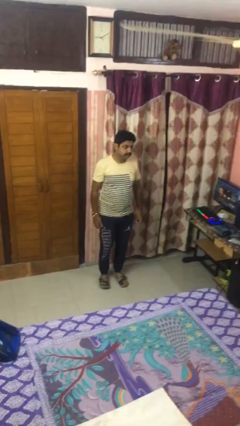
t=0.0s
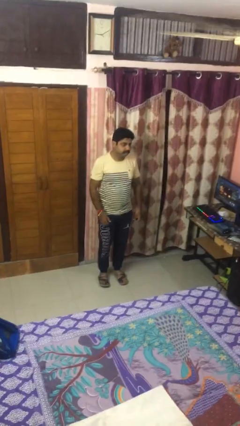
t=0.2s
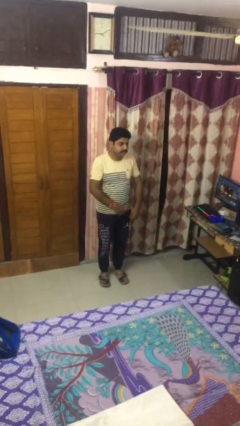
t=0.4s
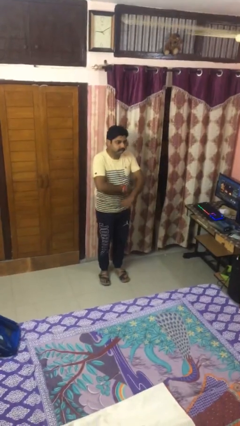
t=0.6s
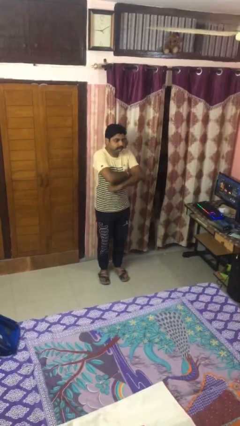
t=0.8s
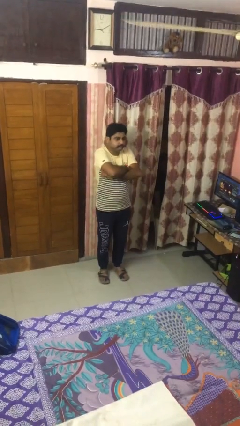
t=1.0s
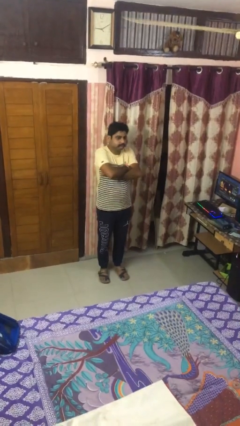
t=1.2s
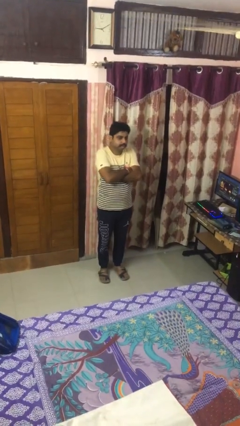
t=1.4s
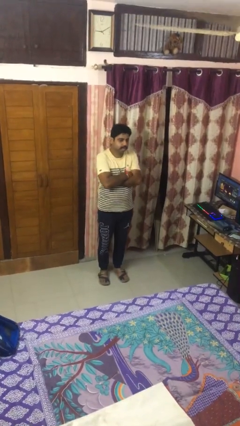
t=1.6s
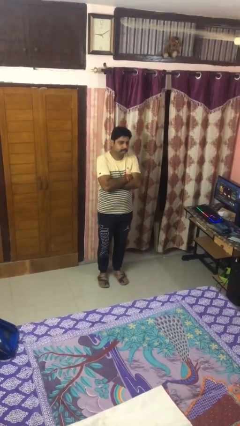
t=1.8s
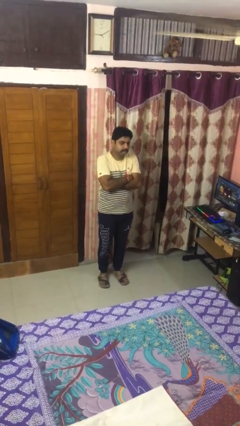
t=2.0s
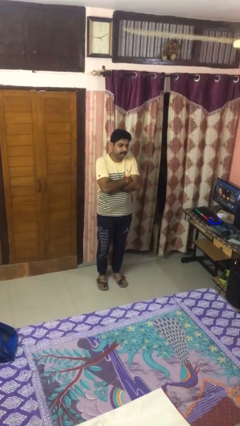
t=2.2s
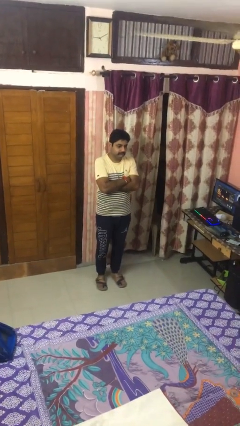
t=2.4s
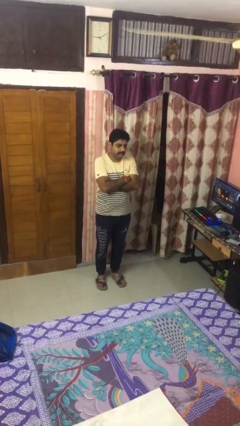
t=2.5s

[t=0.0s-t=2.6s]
person crosses arms

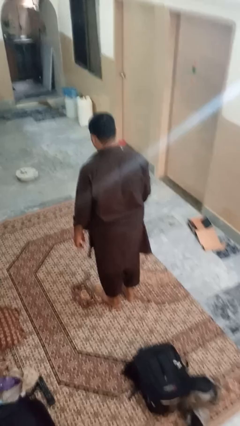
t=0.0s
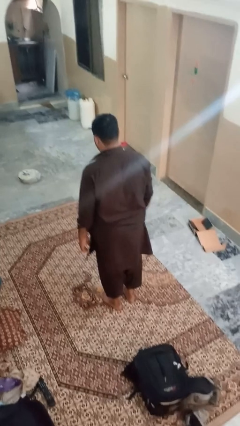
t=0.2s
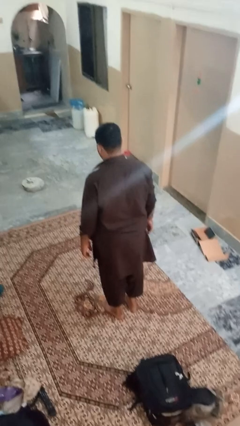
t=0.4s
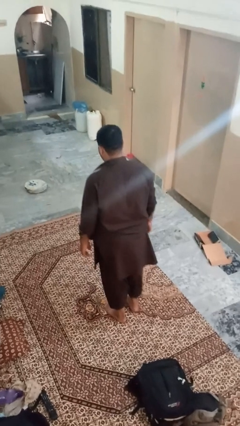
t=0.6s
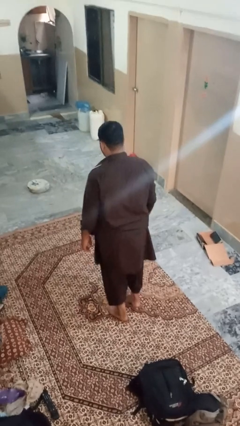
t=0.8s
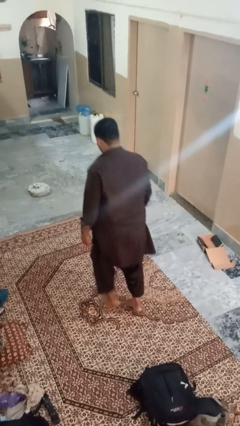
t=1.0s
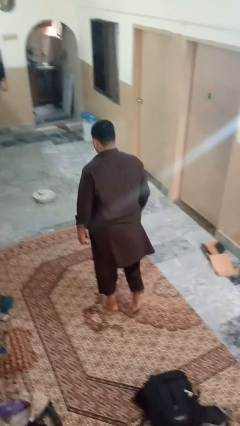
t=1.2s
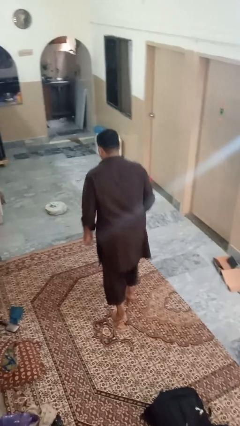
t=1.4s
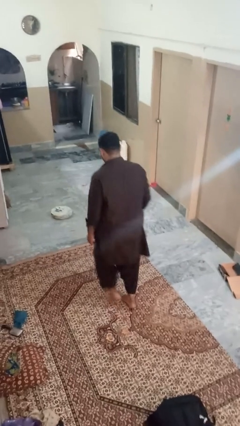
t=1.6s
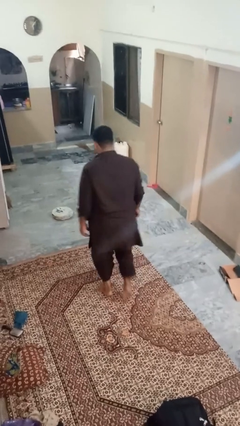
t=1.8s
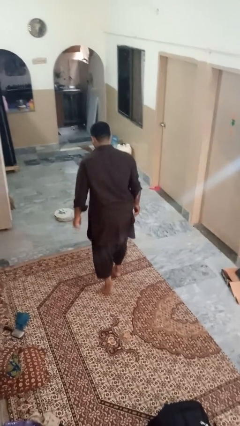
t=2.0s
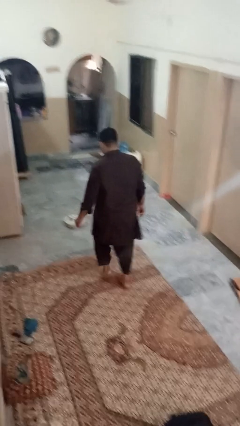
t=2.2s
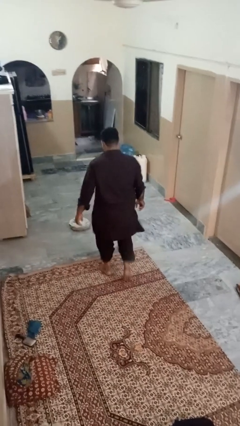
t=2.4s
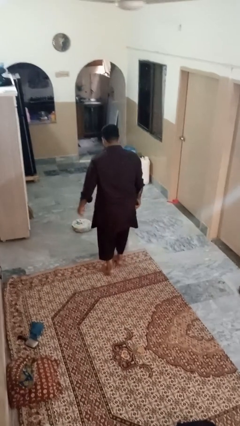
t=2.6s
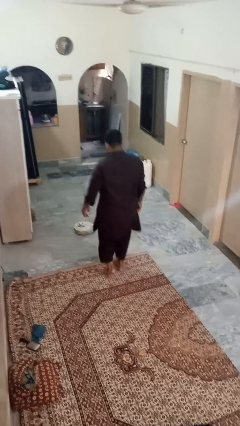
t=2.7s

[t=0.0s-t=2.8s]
person walks tiptoe

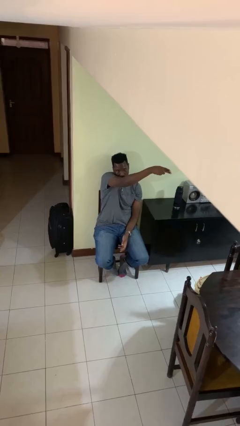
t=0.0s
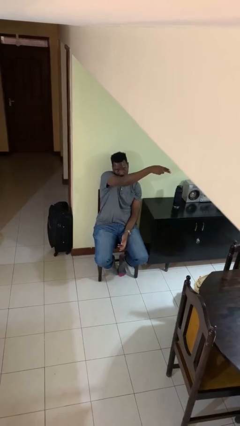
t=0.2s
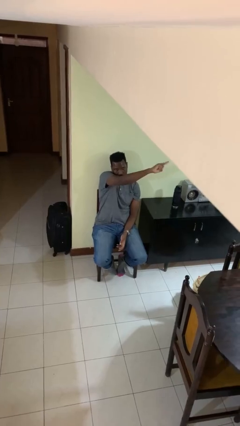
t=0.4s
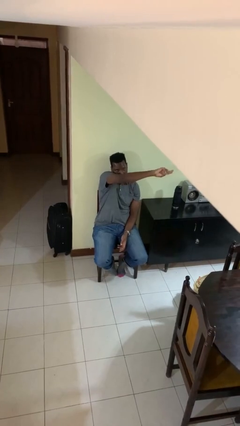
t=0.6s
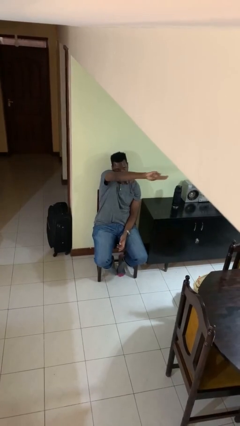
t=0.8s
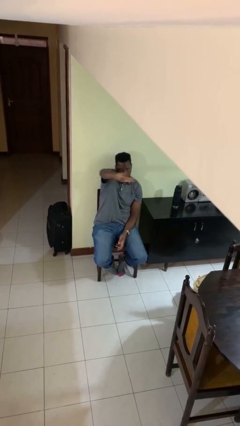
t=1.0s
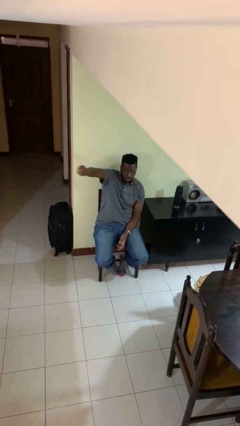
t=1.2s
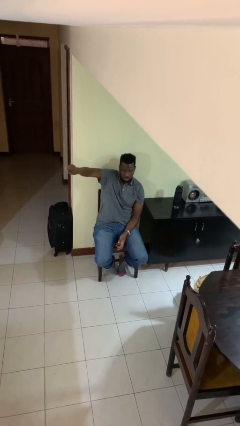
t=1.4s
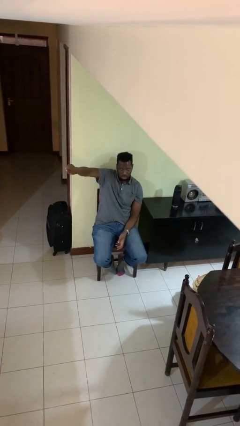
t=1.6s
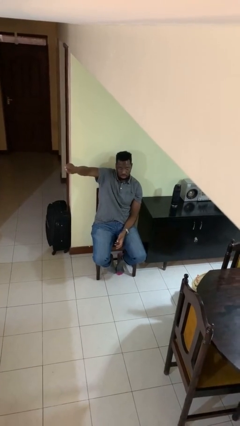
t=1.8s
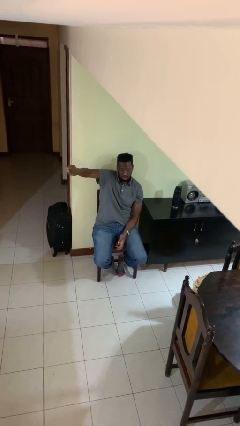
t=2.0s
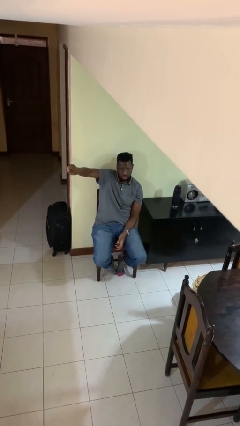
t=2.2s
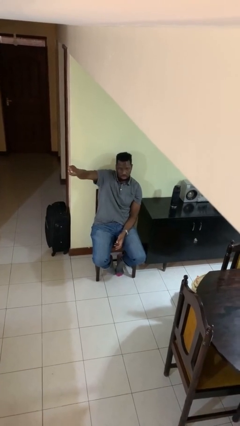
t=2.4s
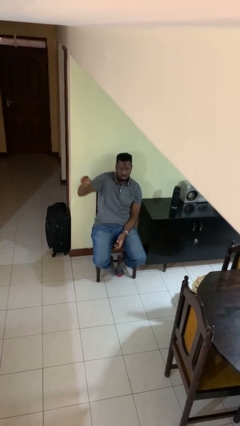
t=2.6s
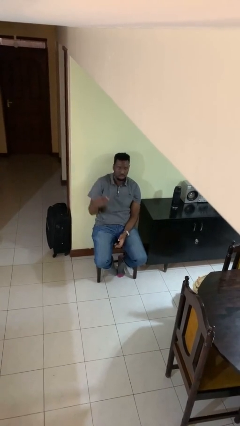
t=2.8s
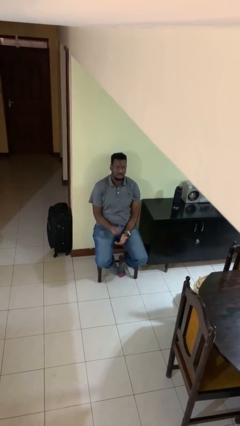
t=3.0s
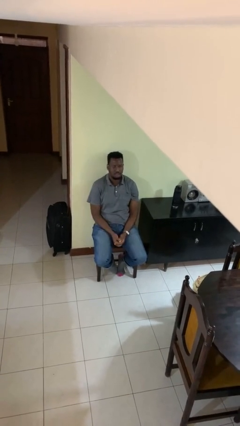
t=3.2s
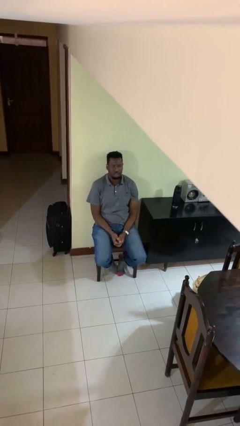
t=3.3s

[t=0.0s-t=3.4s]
person gestures swipe right

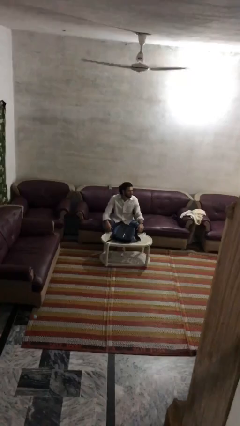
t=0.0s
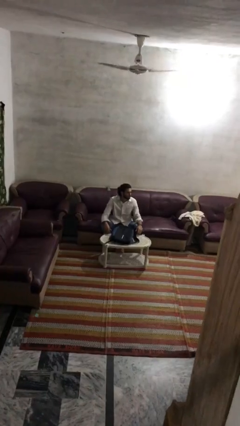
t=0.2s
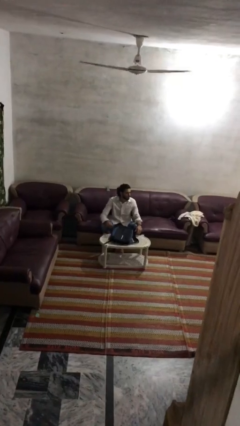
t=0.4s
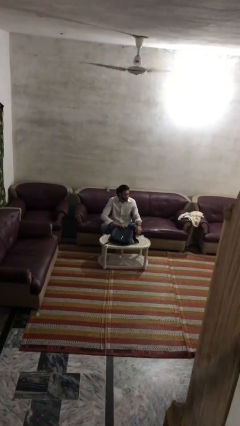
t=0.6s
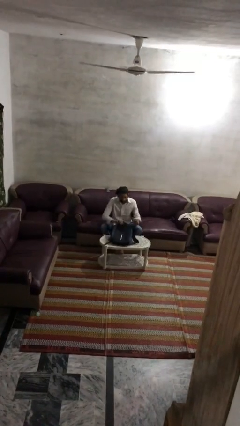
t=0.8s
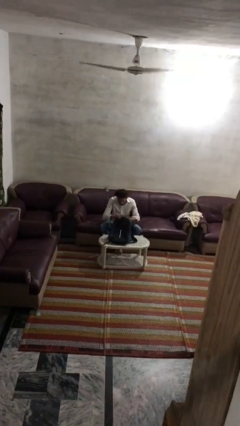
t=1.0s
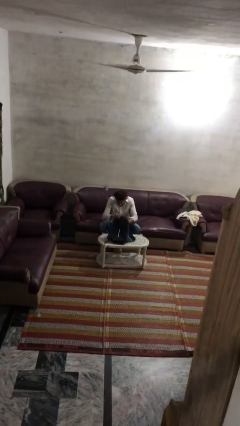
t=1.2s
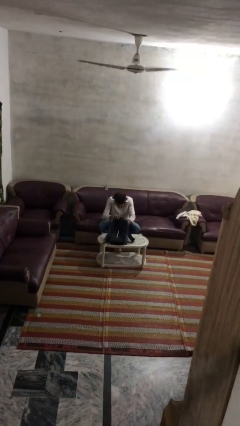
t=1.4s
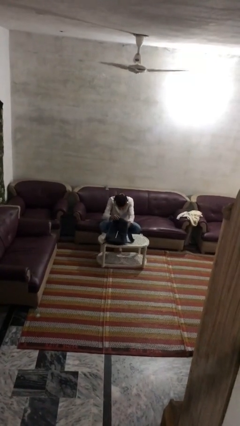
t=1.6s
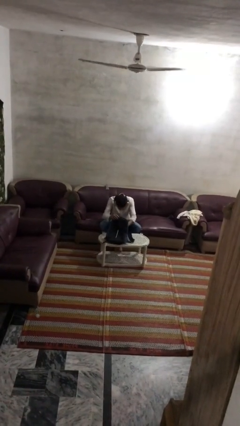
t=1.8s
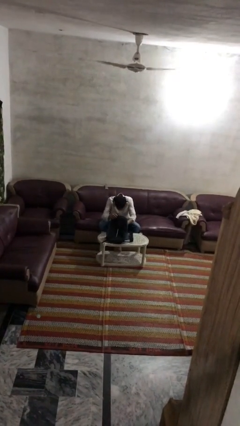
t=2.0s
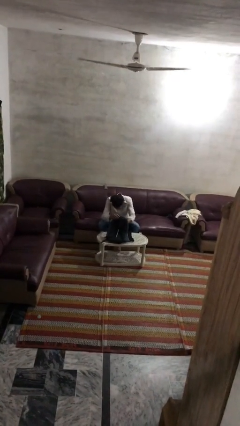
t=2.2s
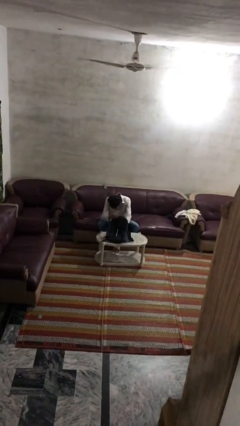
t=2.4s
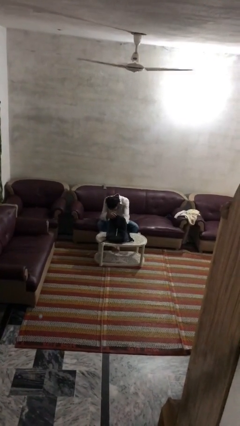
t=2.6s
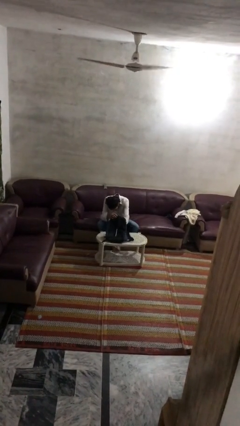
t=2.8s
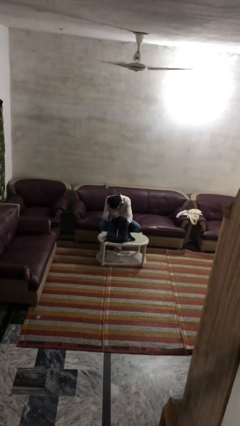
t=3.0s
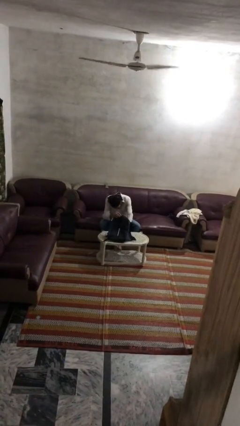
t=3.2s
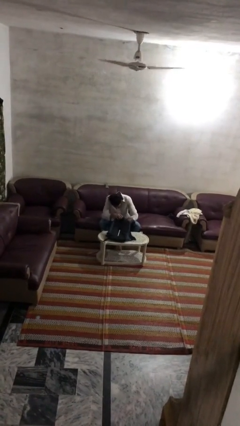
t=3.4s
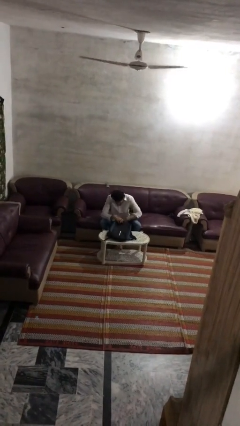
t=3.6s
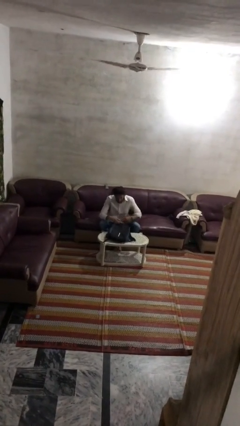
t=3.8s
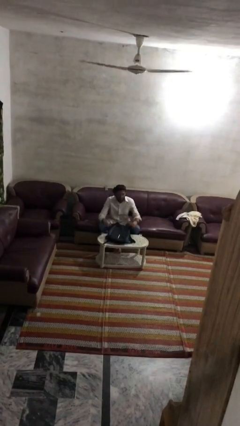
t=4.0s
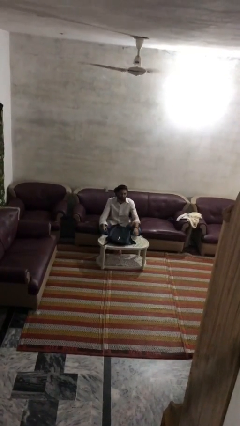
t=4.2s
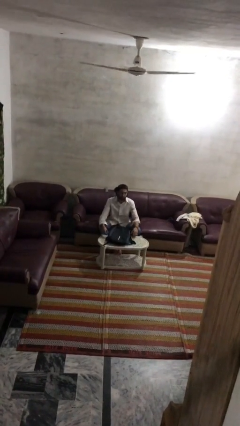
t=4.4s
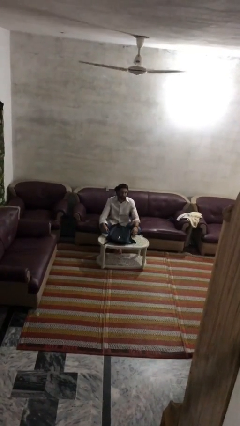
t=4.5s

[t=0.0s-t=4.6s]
person searches in bag

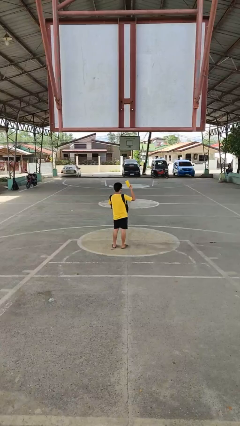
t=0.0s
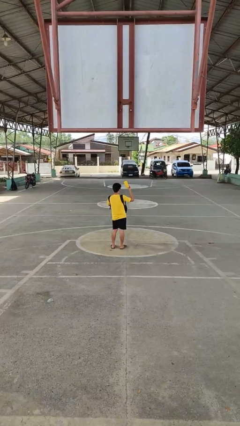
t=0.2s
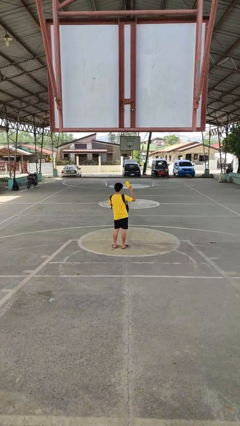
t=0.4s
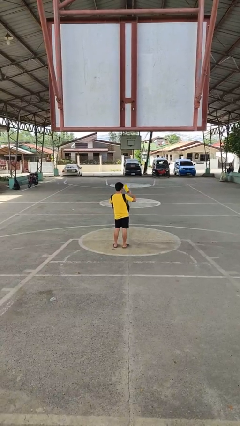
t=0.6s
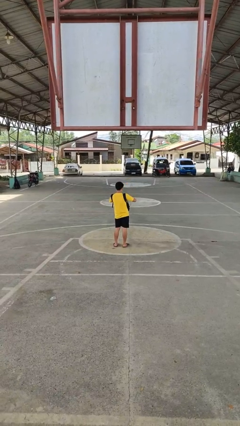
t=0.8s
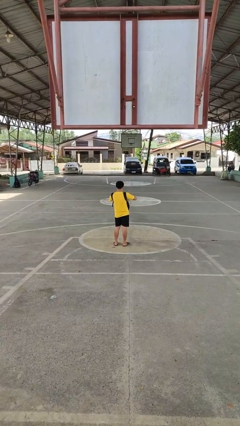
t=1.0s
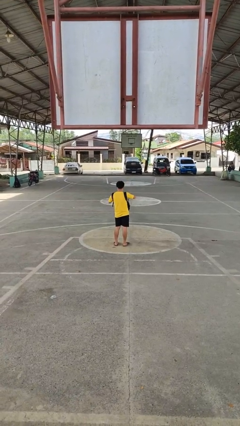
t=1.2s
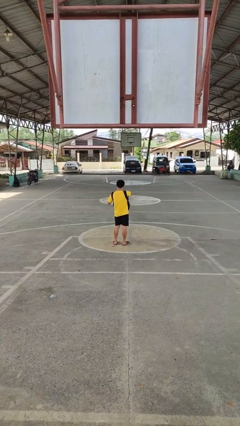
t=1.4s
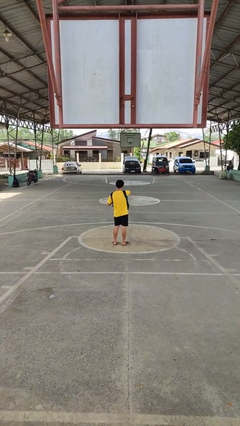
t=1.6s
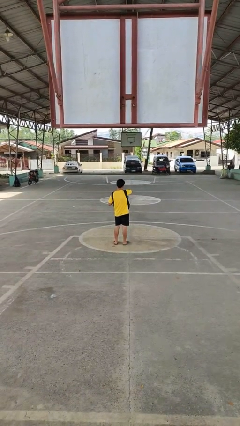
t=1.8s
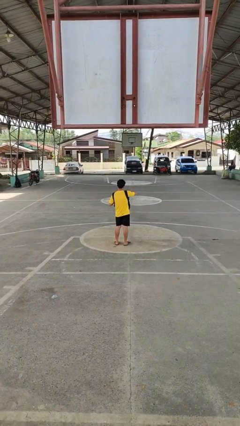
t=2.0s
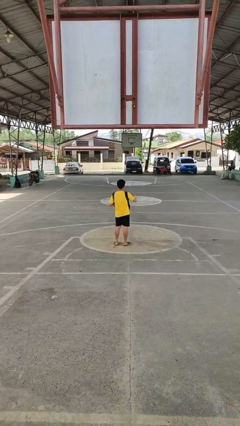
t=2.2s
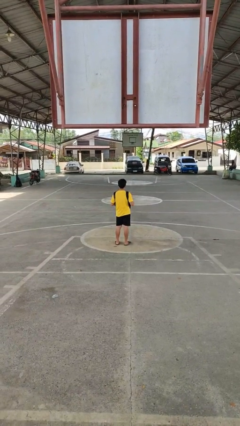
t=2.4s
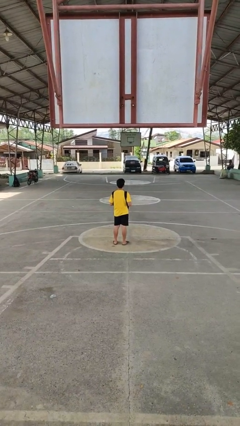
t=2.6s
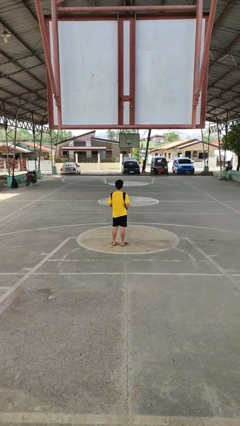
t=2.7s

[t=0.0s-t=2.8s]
person puts object into backpack

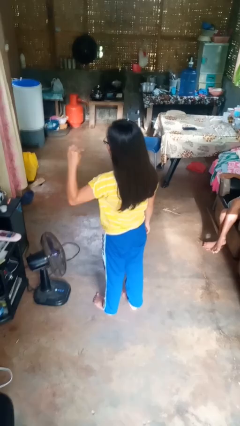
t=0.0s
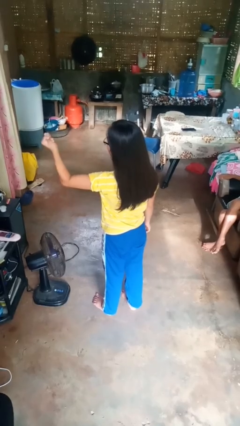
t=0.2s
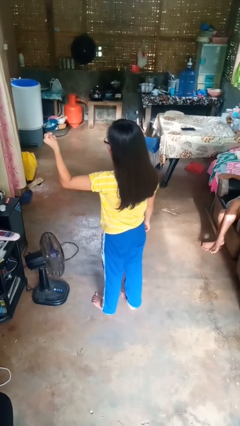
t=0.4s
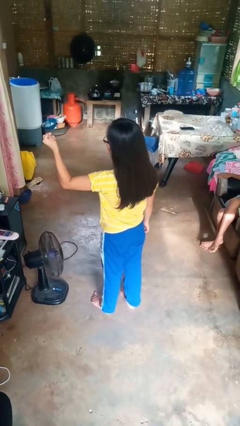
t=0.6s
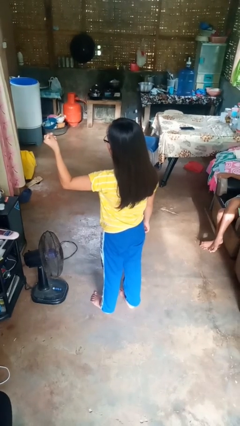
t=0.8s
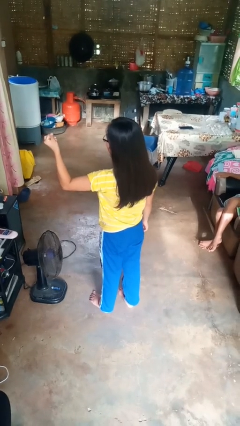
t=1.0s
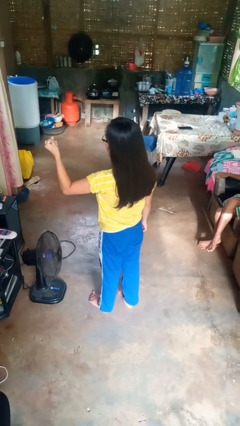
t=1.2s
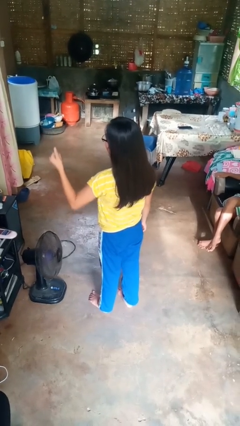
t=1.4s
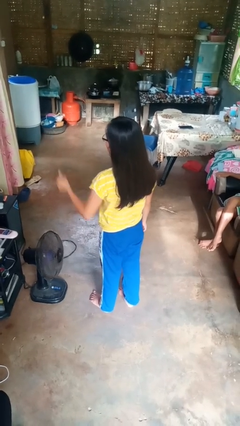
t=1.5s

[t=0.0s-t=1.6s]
person snaps fingers
